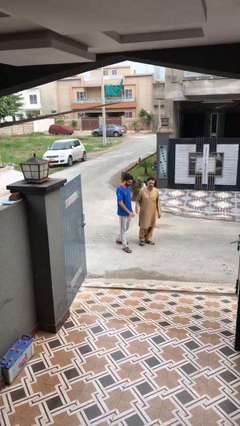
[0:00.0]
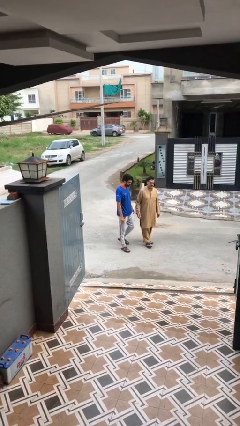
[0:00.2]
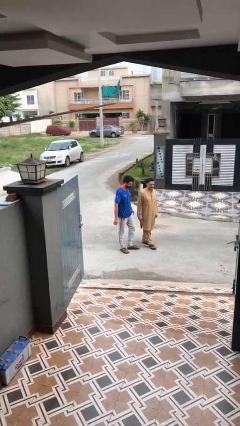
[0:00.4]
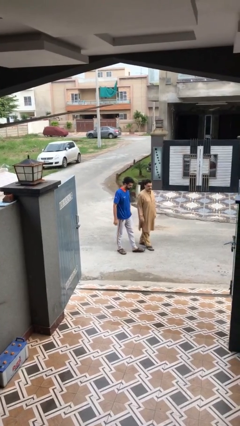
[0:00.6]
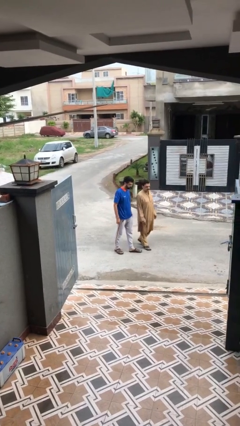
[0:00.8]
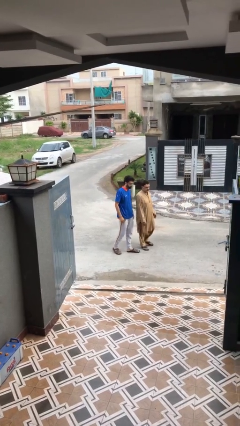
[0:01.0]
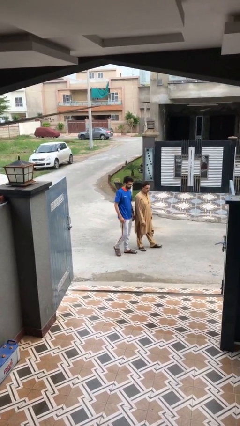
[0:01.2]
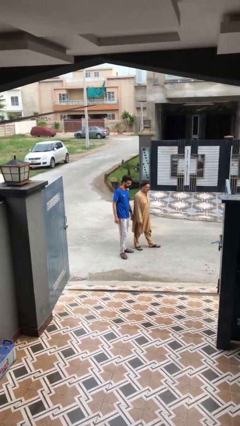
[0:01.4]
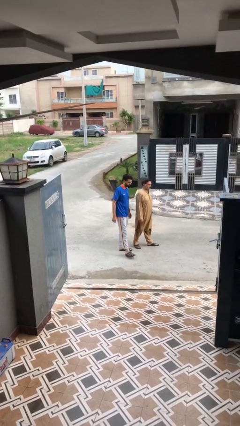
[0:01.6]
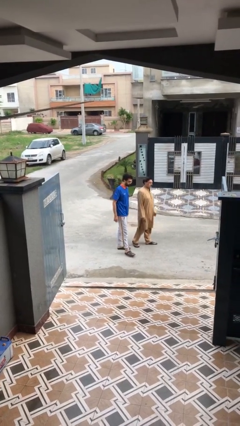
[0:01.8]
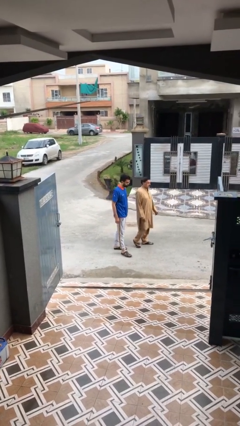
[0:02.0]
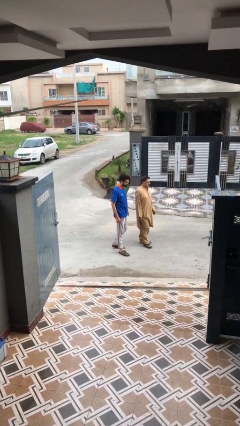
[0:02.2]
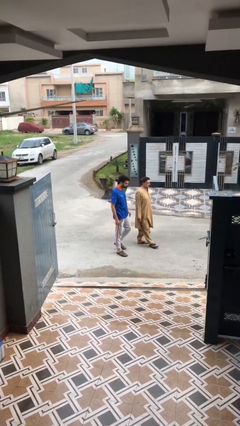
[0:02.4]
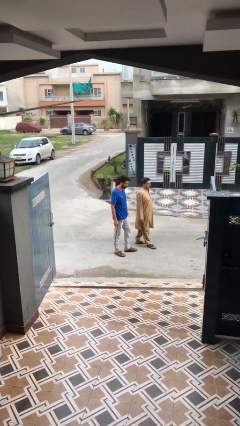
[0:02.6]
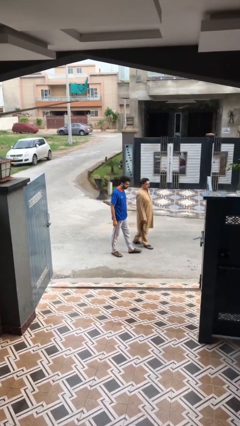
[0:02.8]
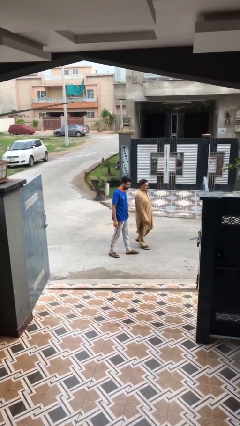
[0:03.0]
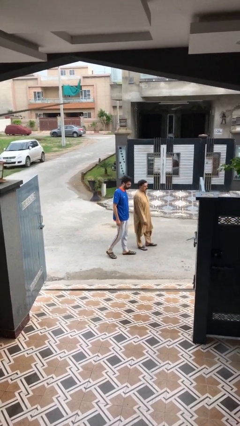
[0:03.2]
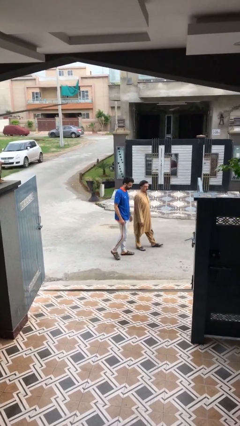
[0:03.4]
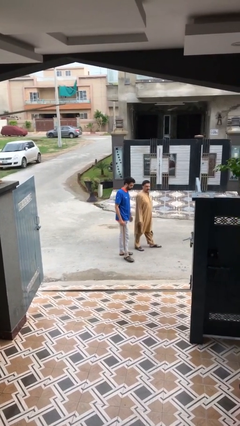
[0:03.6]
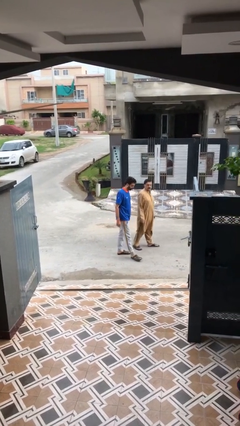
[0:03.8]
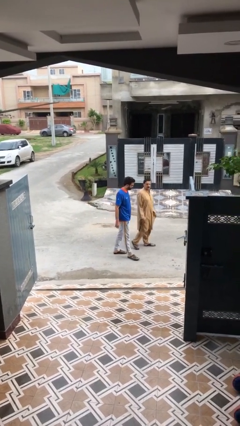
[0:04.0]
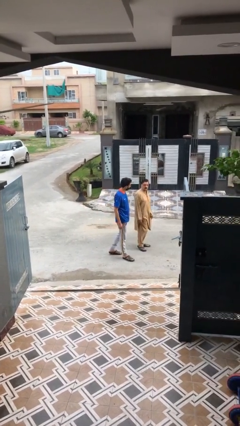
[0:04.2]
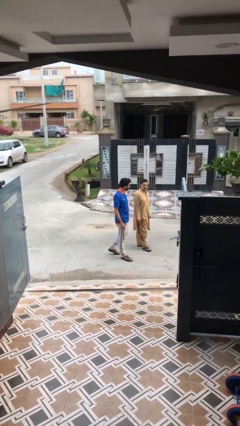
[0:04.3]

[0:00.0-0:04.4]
person talks to person

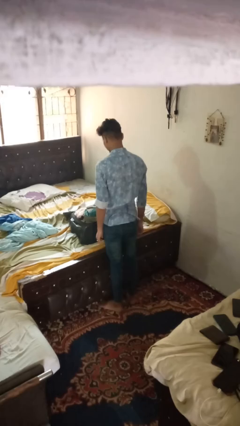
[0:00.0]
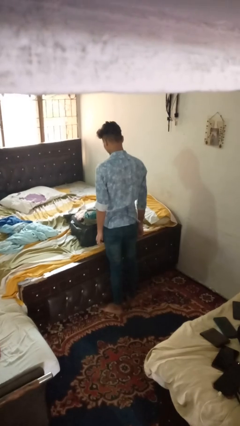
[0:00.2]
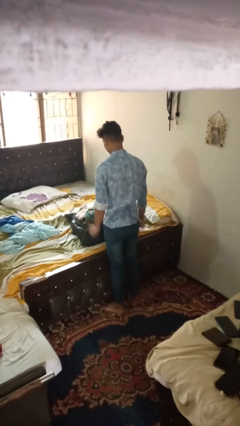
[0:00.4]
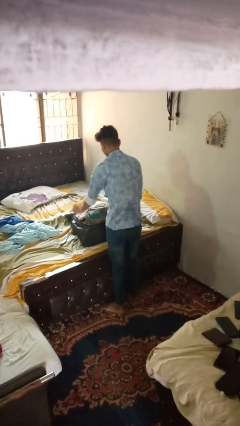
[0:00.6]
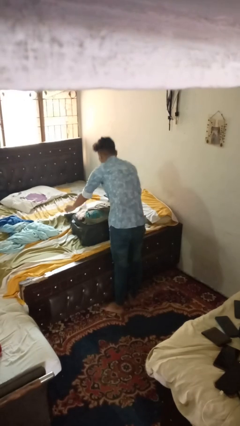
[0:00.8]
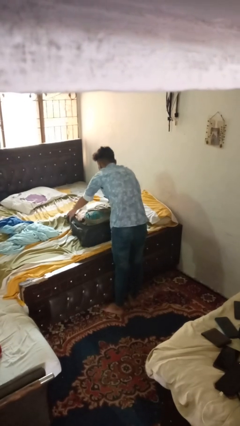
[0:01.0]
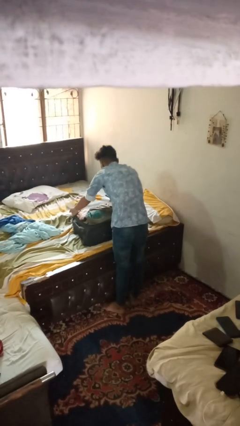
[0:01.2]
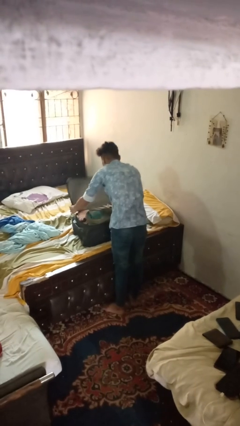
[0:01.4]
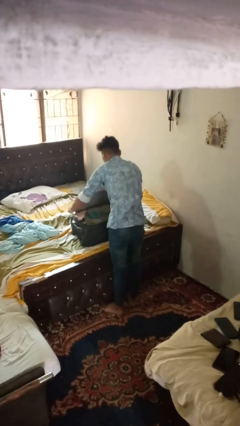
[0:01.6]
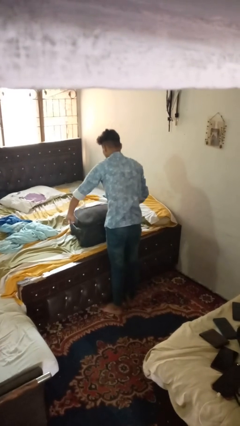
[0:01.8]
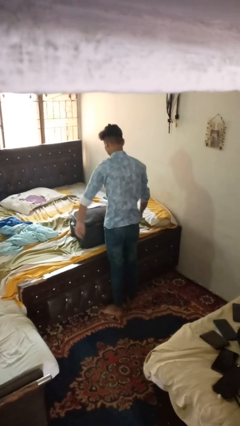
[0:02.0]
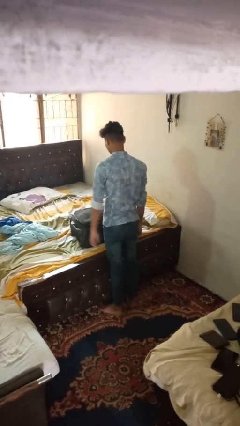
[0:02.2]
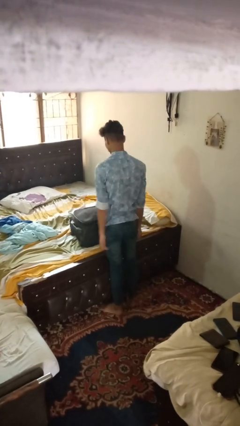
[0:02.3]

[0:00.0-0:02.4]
person closes suitcase

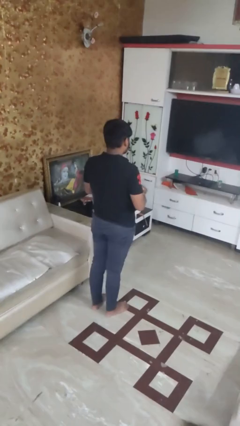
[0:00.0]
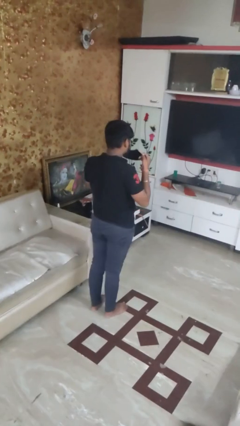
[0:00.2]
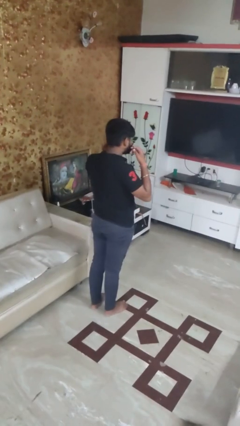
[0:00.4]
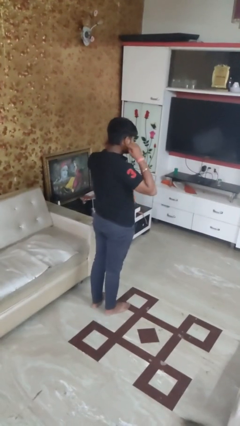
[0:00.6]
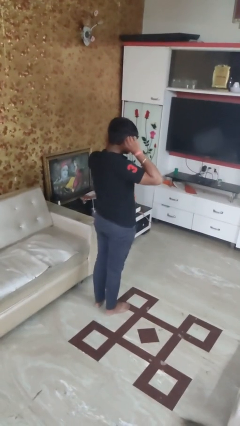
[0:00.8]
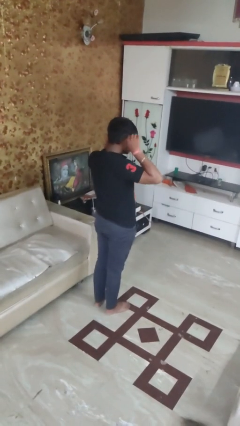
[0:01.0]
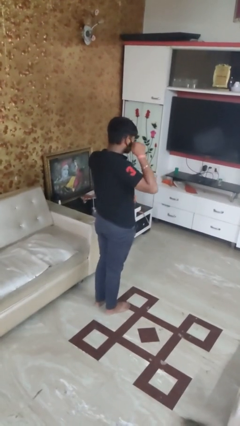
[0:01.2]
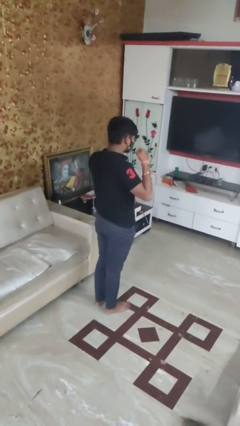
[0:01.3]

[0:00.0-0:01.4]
person puts on facemask

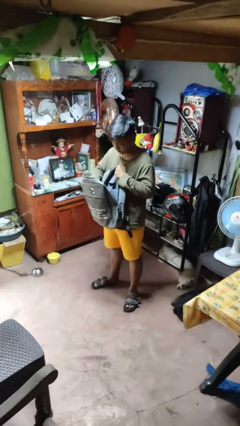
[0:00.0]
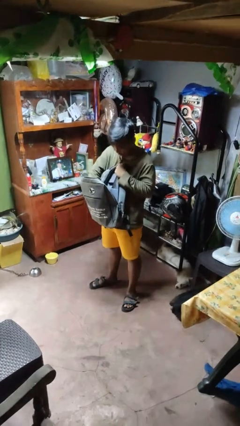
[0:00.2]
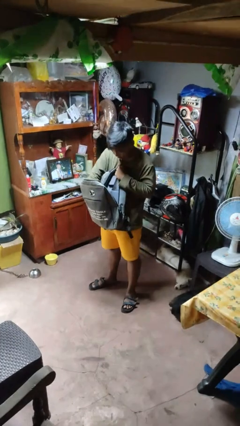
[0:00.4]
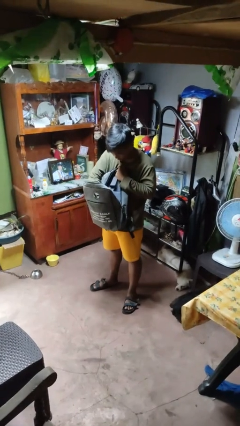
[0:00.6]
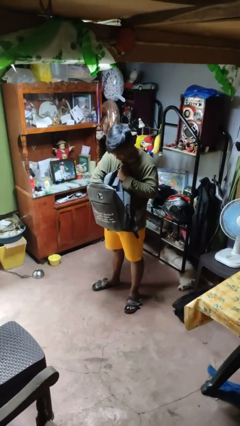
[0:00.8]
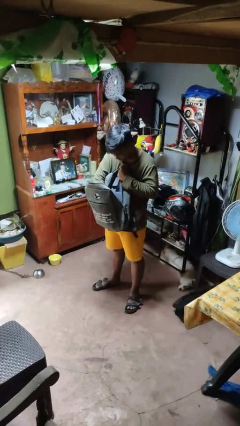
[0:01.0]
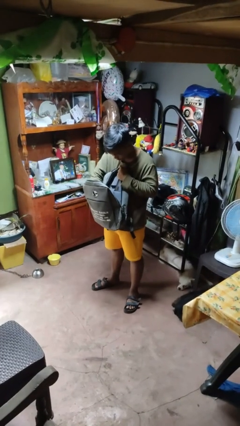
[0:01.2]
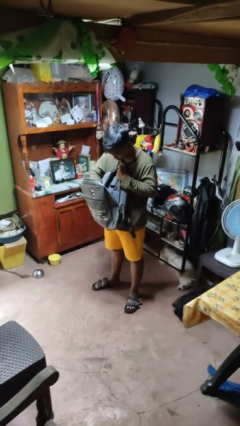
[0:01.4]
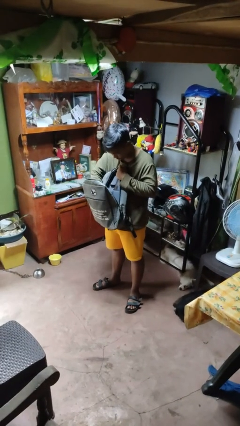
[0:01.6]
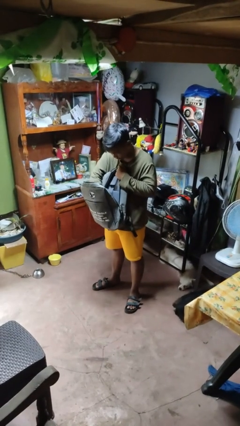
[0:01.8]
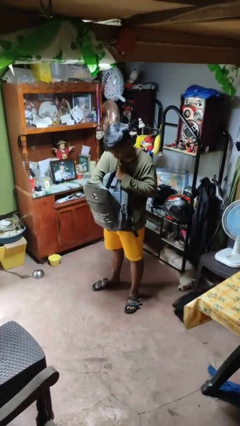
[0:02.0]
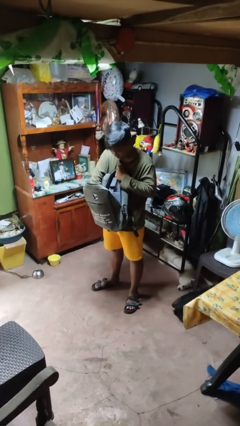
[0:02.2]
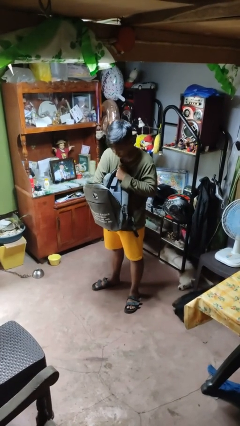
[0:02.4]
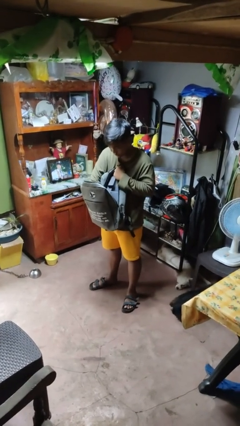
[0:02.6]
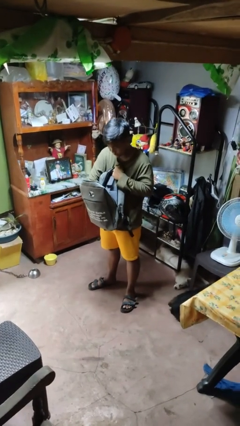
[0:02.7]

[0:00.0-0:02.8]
person searches in backpack

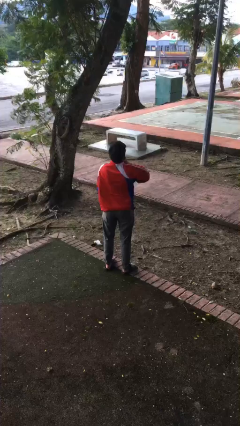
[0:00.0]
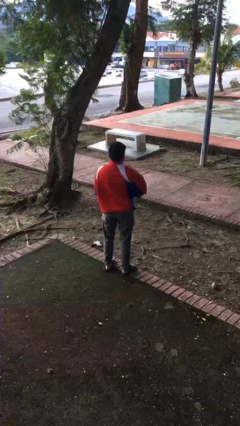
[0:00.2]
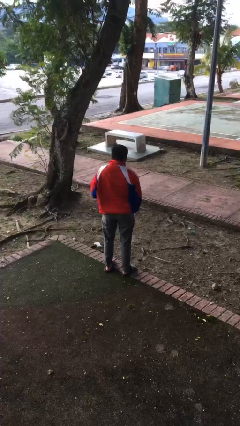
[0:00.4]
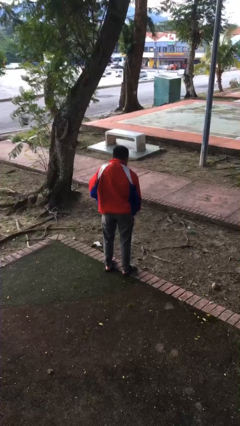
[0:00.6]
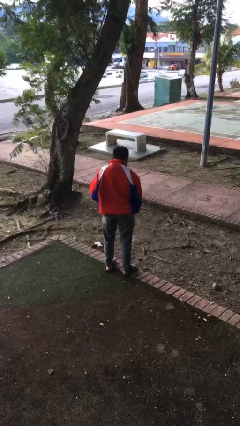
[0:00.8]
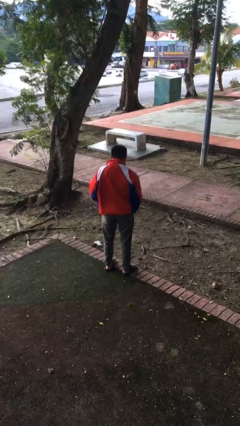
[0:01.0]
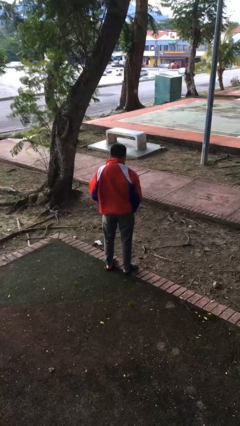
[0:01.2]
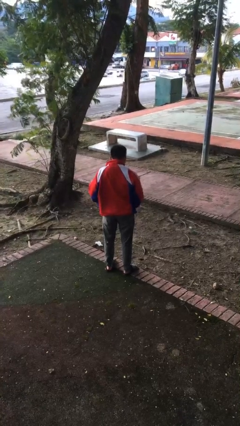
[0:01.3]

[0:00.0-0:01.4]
person unzips jacket

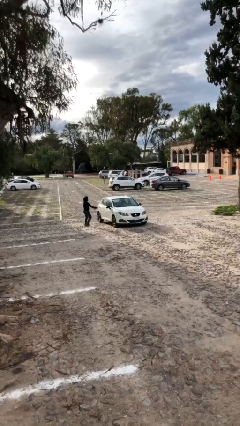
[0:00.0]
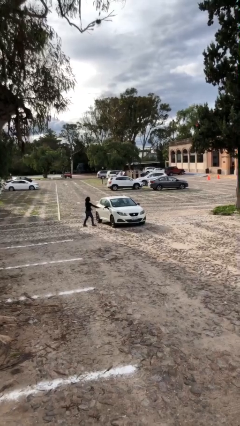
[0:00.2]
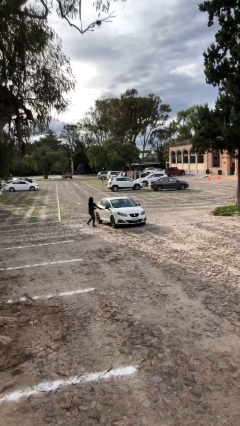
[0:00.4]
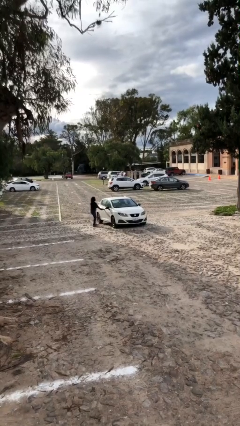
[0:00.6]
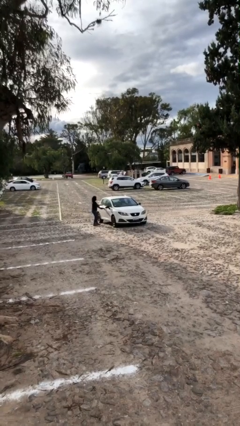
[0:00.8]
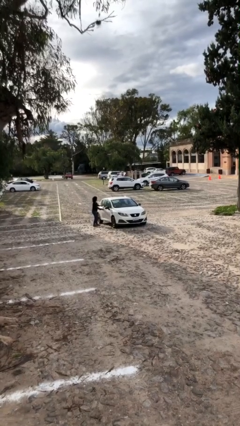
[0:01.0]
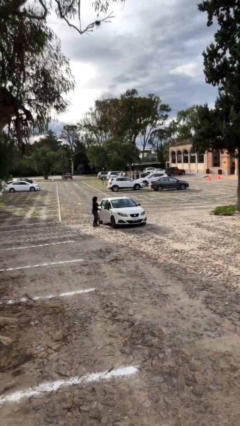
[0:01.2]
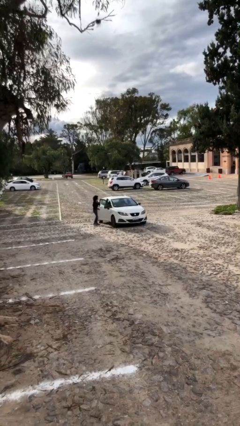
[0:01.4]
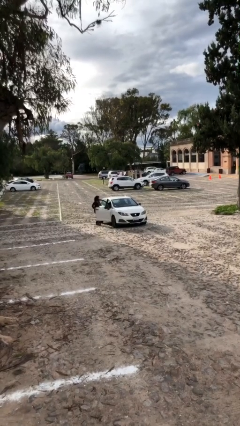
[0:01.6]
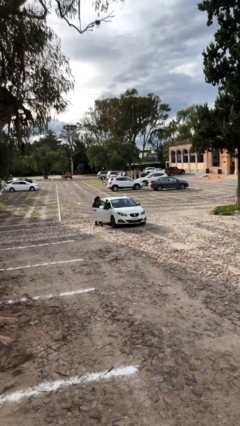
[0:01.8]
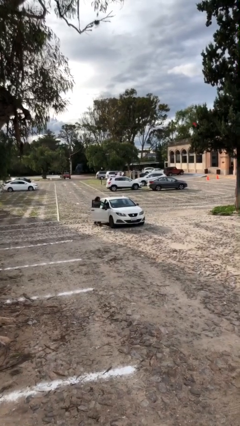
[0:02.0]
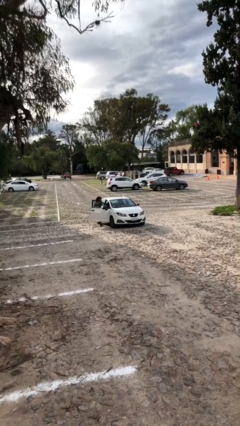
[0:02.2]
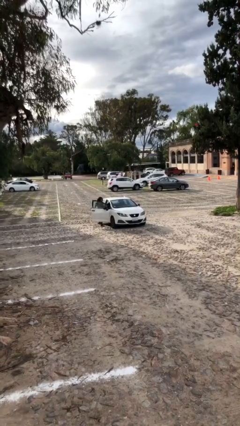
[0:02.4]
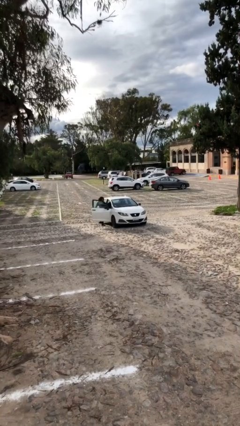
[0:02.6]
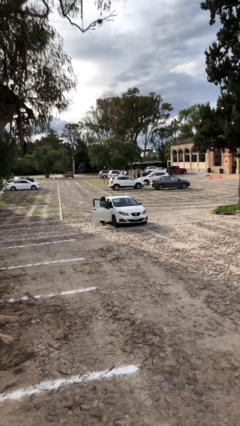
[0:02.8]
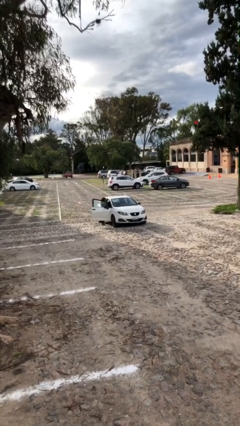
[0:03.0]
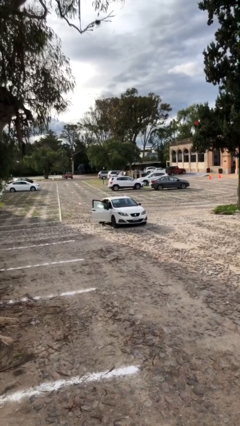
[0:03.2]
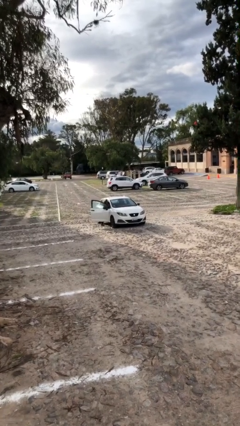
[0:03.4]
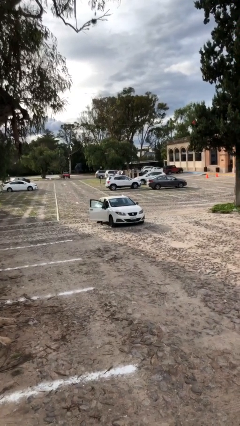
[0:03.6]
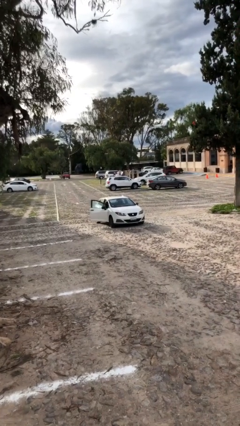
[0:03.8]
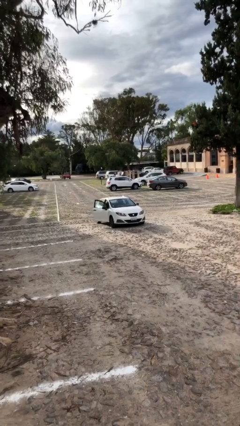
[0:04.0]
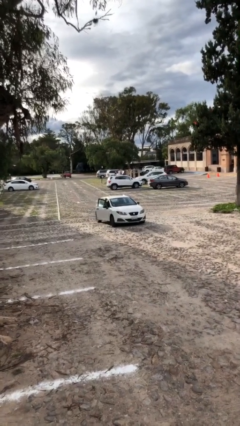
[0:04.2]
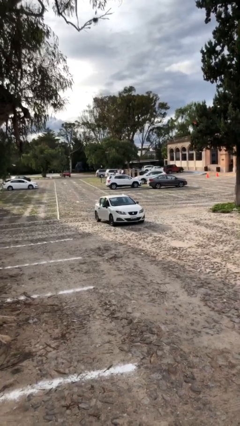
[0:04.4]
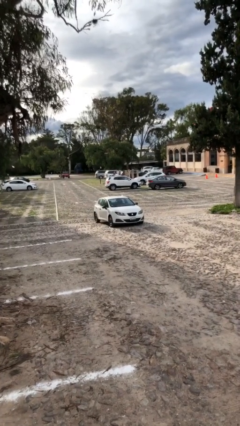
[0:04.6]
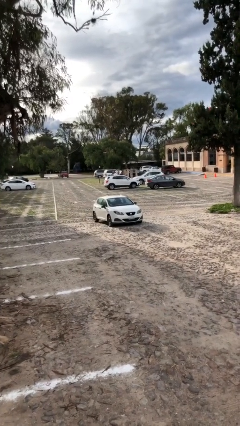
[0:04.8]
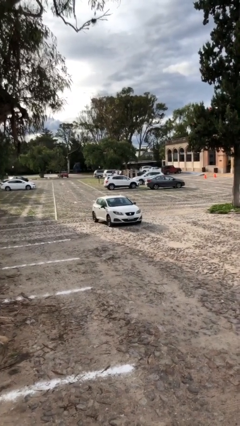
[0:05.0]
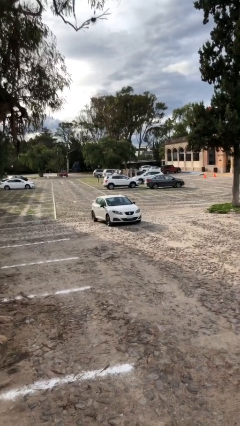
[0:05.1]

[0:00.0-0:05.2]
car picks up person
